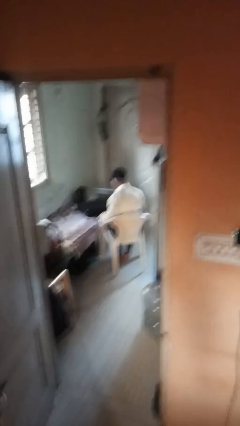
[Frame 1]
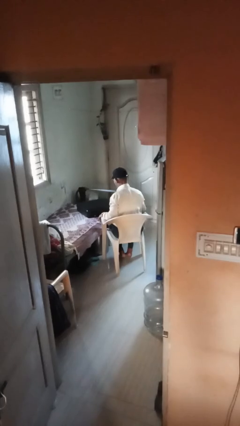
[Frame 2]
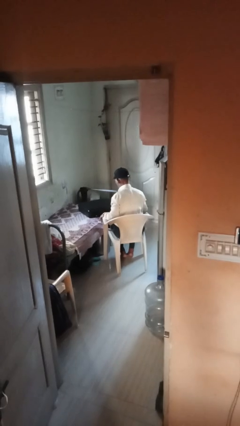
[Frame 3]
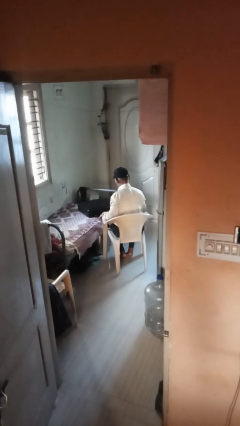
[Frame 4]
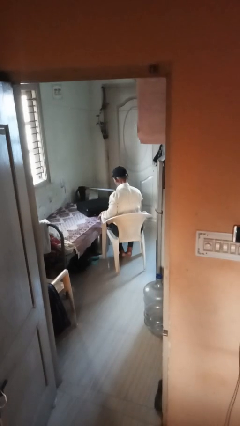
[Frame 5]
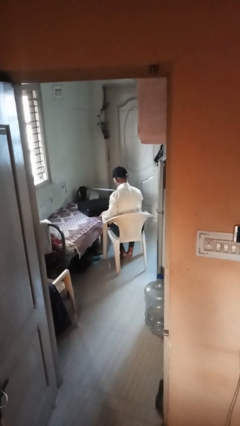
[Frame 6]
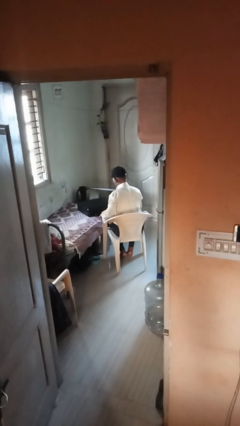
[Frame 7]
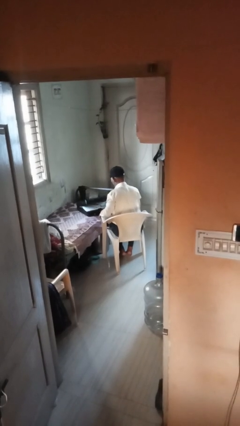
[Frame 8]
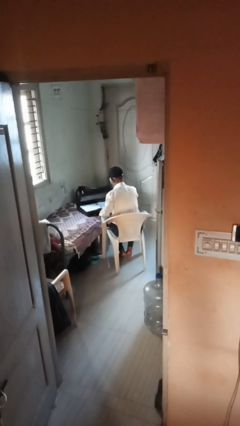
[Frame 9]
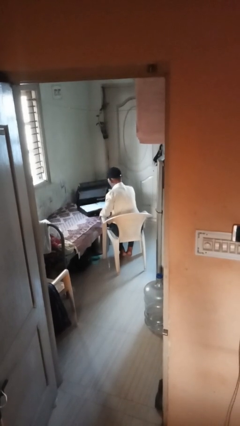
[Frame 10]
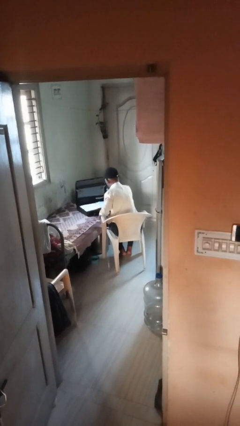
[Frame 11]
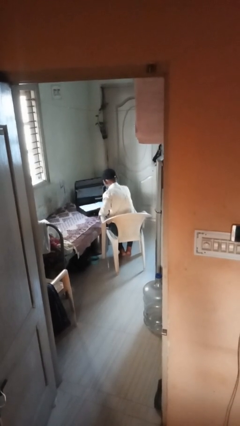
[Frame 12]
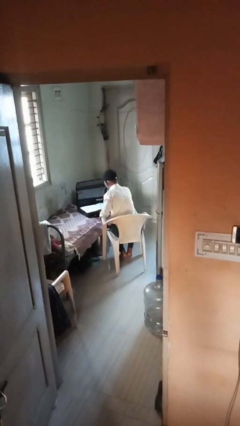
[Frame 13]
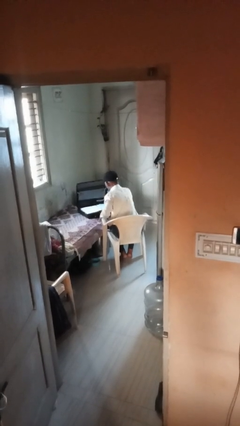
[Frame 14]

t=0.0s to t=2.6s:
person opens suitcase

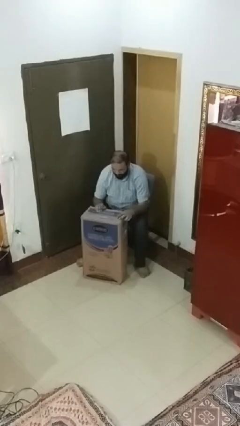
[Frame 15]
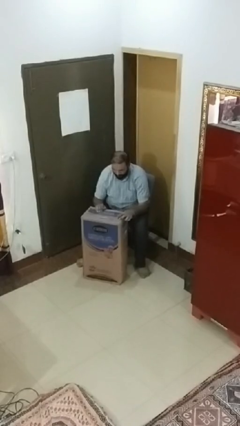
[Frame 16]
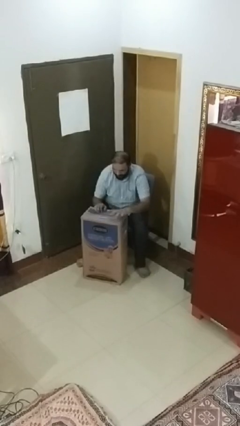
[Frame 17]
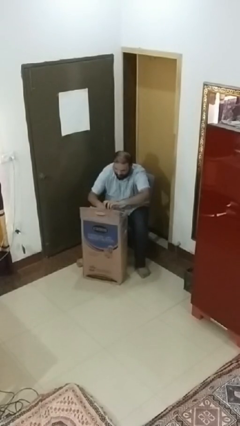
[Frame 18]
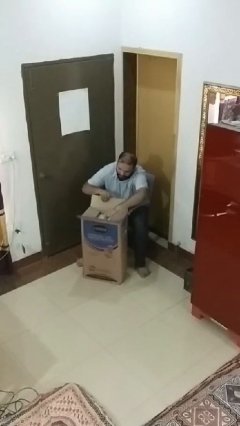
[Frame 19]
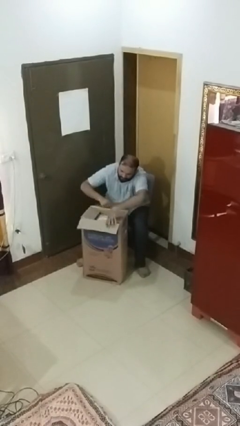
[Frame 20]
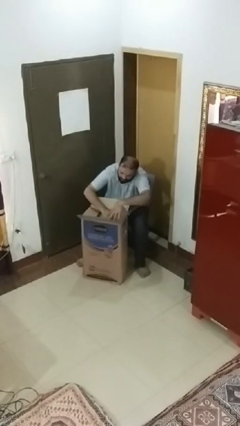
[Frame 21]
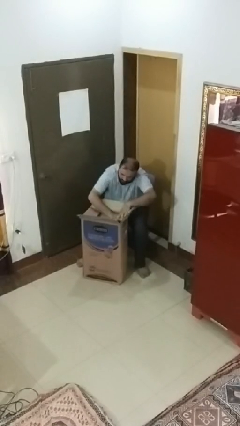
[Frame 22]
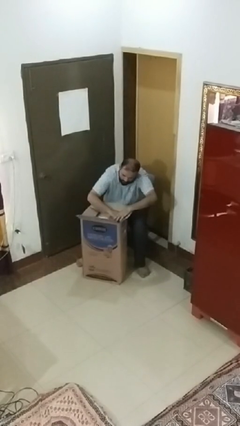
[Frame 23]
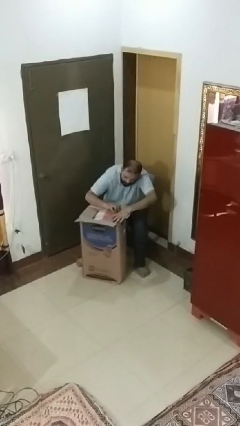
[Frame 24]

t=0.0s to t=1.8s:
person searches in box

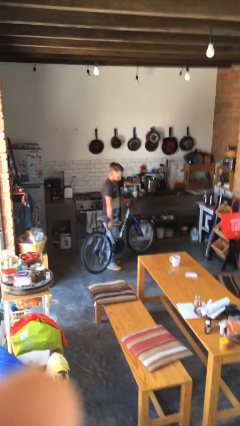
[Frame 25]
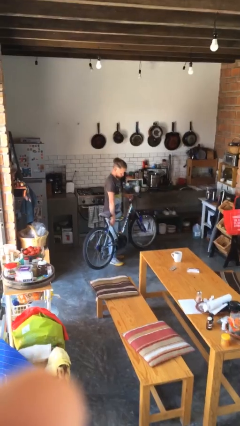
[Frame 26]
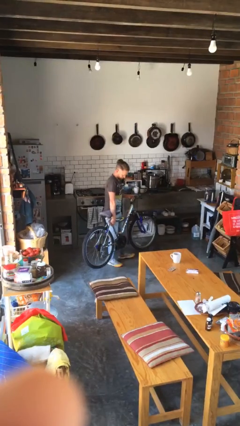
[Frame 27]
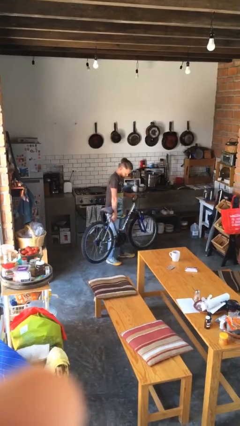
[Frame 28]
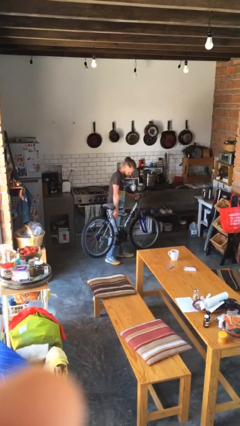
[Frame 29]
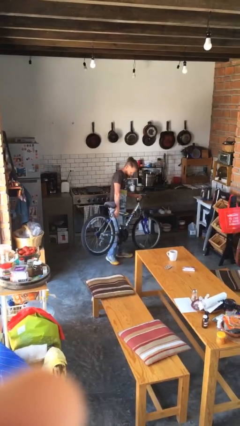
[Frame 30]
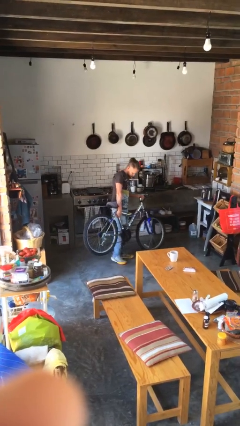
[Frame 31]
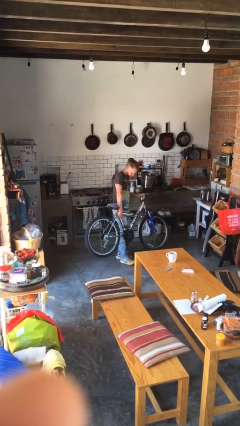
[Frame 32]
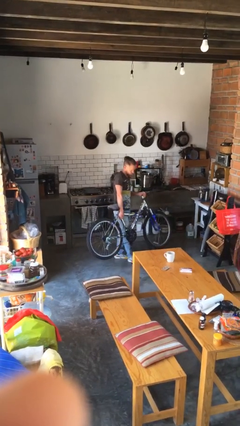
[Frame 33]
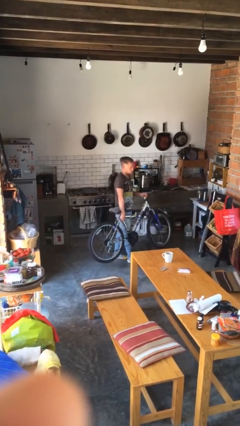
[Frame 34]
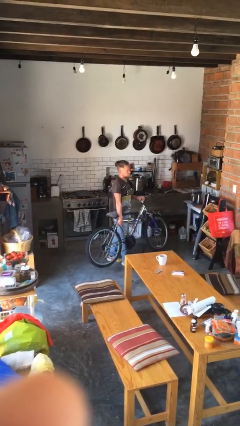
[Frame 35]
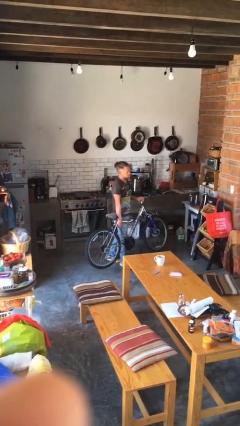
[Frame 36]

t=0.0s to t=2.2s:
person carries bicycle

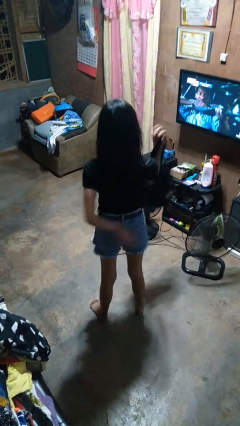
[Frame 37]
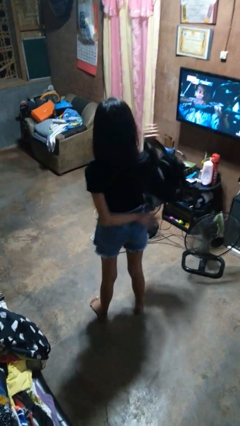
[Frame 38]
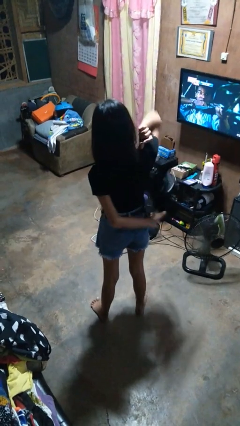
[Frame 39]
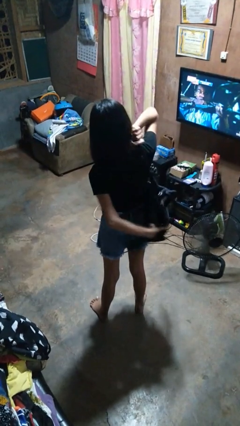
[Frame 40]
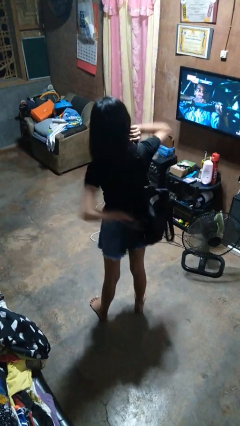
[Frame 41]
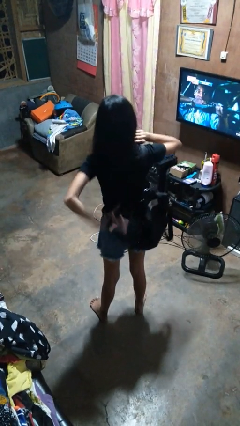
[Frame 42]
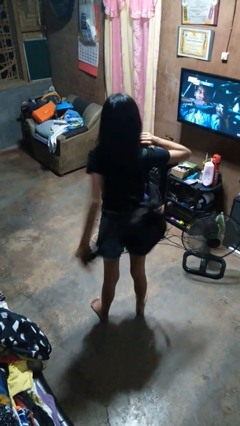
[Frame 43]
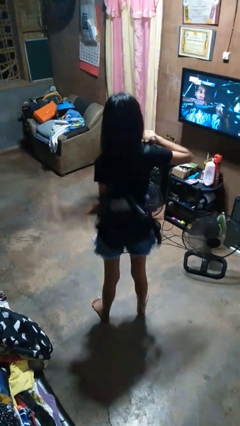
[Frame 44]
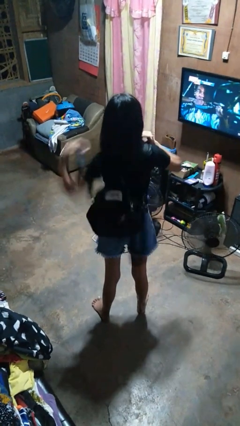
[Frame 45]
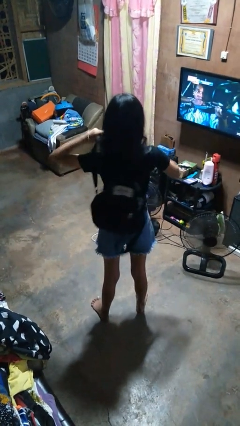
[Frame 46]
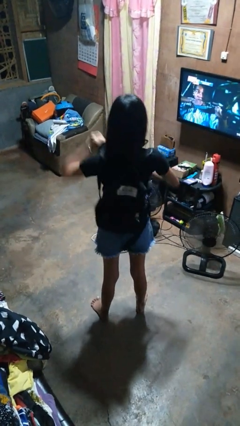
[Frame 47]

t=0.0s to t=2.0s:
person puts on backpack

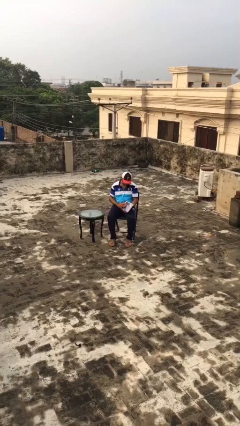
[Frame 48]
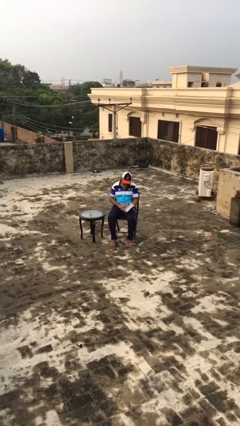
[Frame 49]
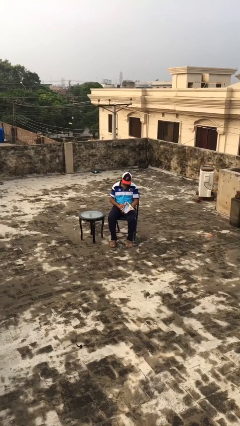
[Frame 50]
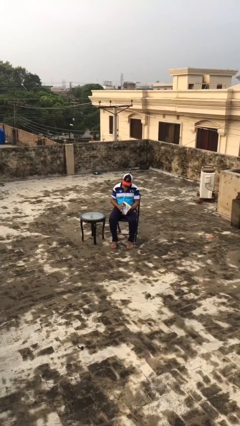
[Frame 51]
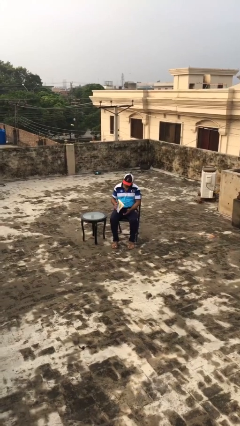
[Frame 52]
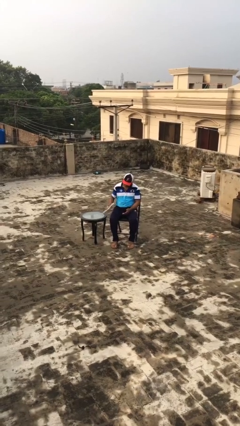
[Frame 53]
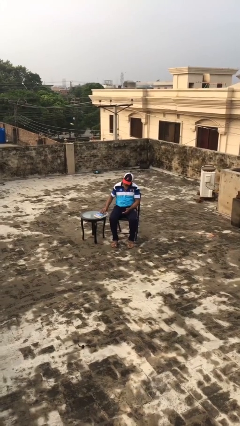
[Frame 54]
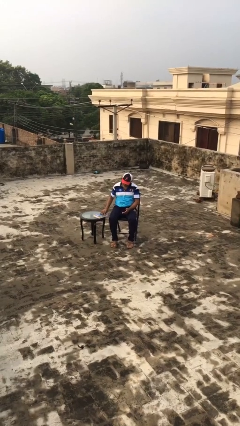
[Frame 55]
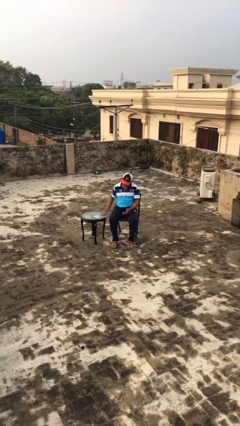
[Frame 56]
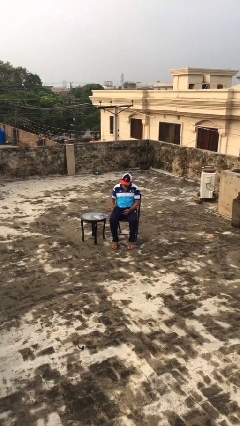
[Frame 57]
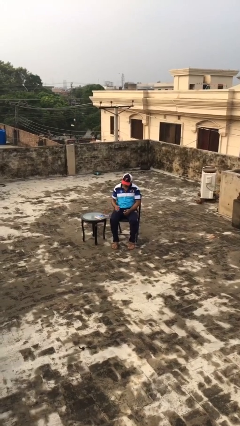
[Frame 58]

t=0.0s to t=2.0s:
person puts down object on table

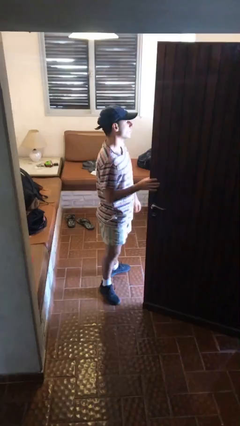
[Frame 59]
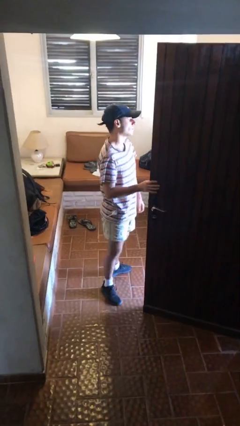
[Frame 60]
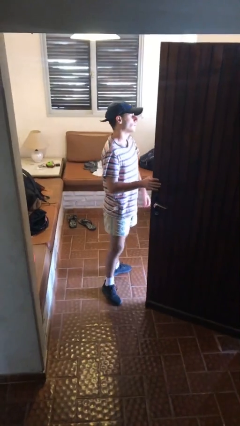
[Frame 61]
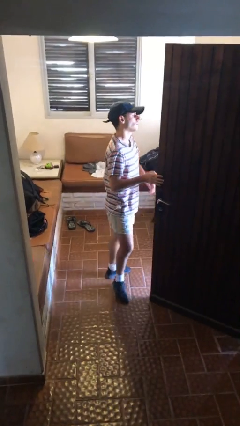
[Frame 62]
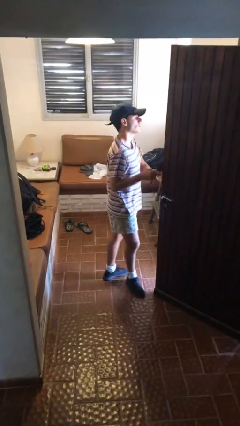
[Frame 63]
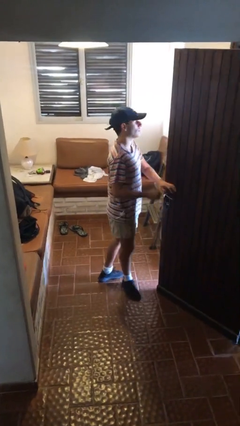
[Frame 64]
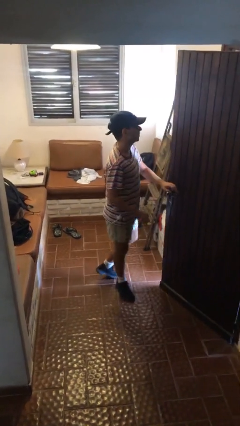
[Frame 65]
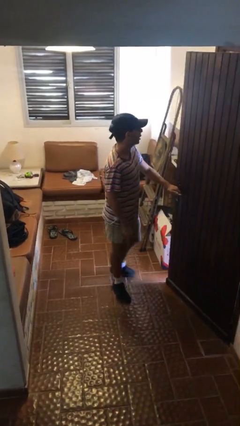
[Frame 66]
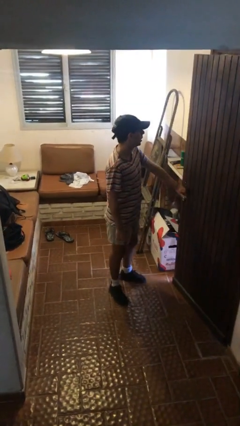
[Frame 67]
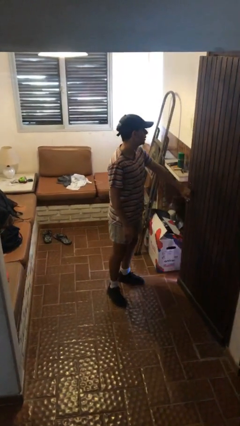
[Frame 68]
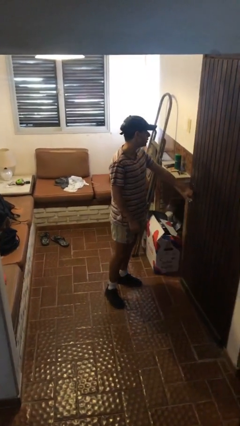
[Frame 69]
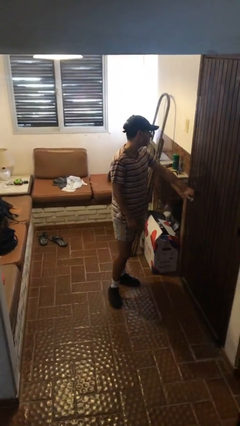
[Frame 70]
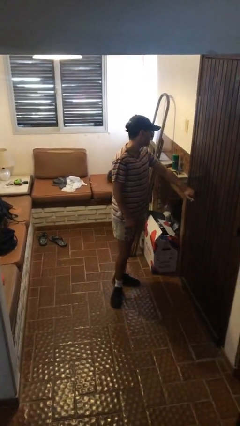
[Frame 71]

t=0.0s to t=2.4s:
person closes facility door

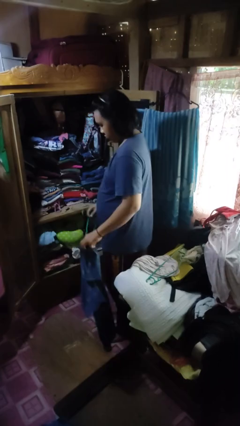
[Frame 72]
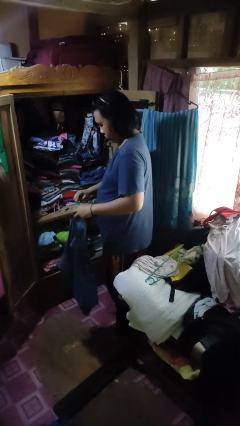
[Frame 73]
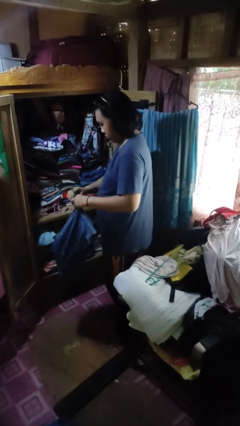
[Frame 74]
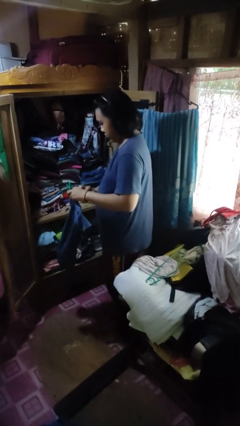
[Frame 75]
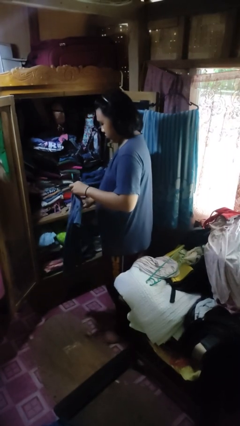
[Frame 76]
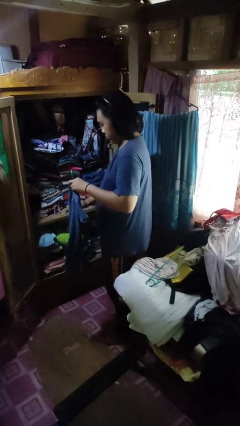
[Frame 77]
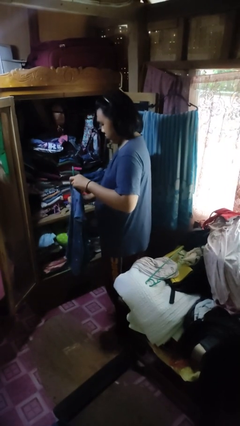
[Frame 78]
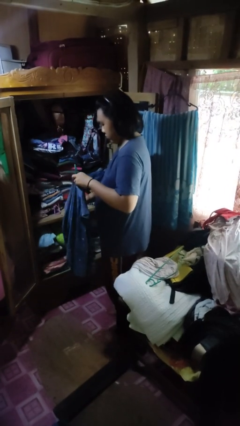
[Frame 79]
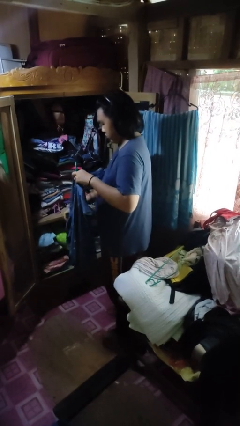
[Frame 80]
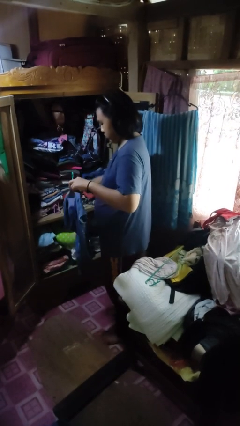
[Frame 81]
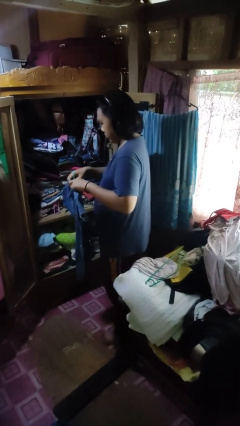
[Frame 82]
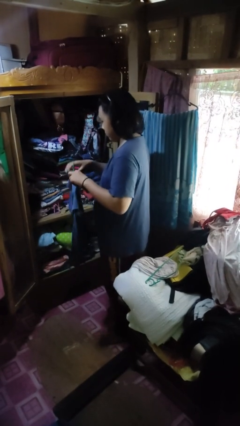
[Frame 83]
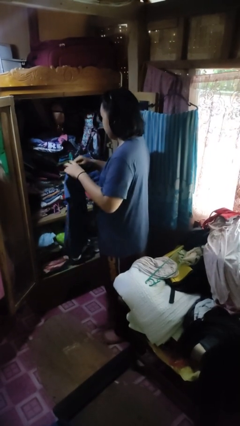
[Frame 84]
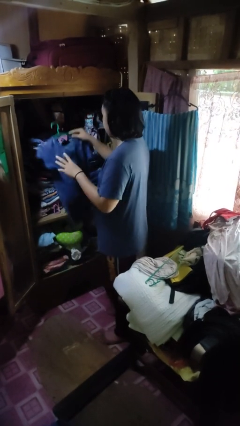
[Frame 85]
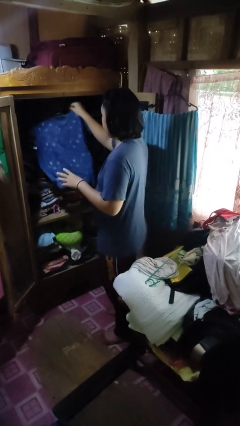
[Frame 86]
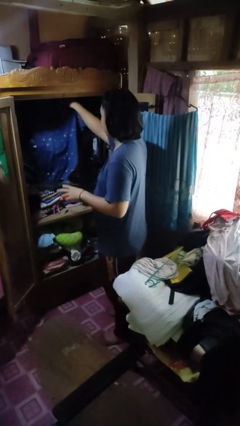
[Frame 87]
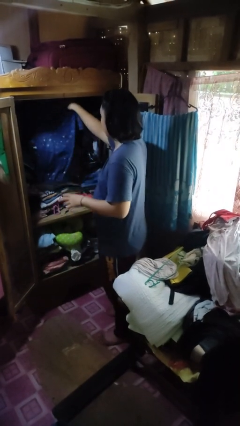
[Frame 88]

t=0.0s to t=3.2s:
person puts clothes into closet

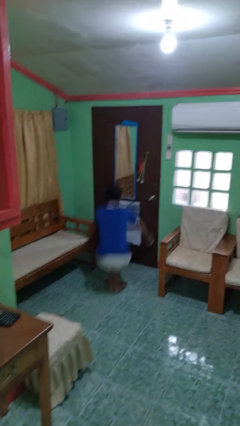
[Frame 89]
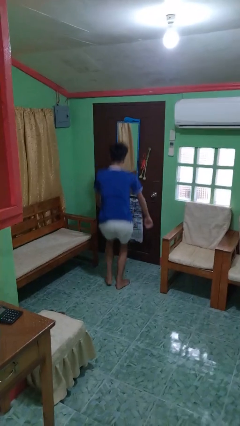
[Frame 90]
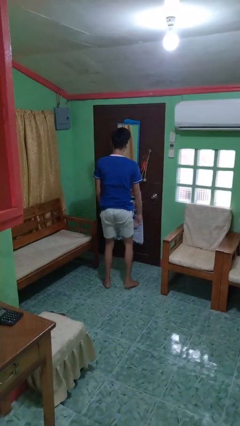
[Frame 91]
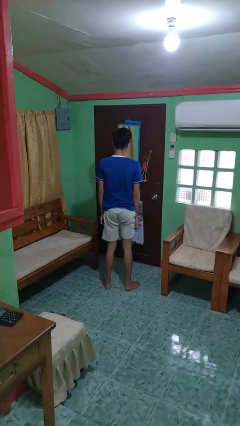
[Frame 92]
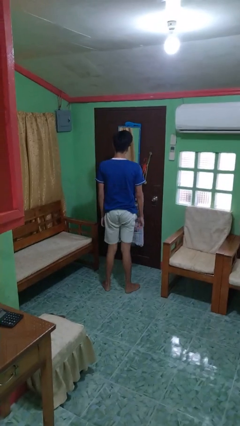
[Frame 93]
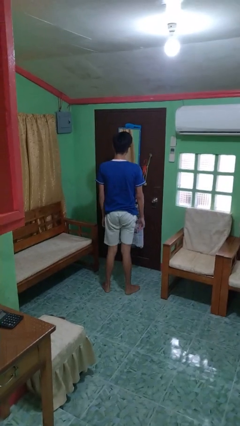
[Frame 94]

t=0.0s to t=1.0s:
person stands up

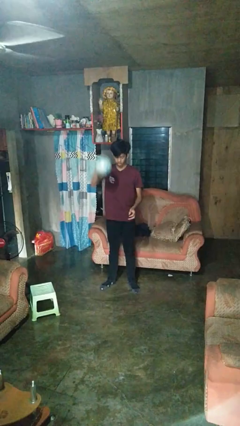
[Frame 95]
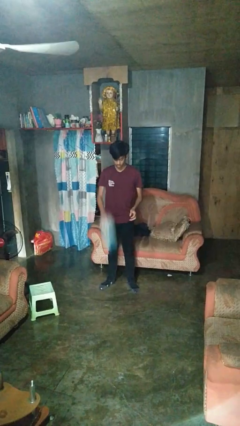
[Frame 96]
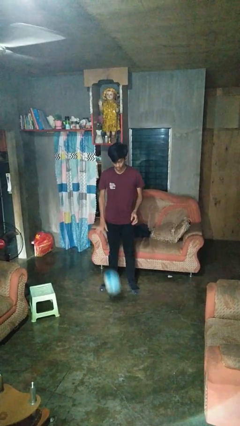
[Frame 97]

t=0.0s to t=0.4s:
person bounces ball on floor
